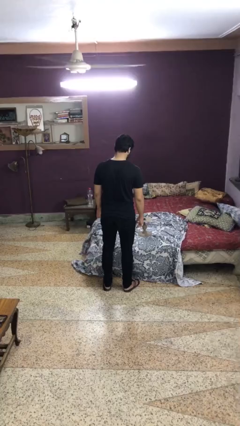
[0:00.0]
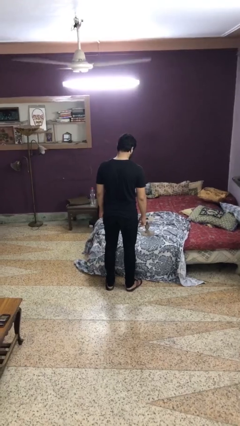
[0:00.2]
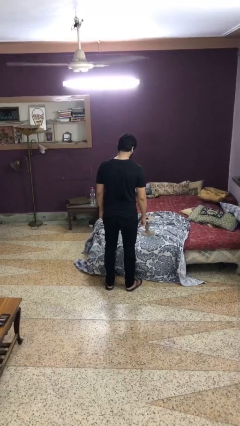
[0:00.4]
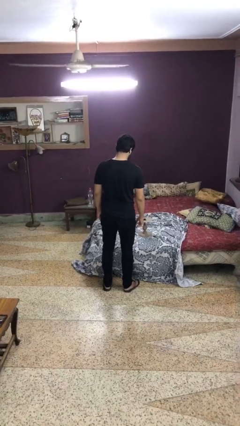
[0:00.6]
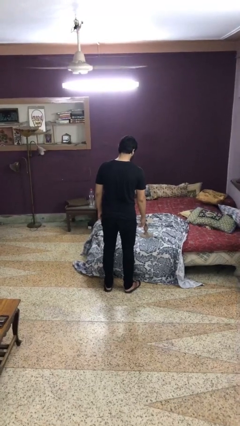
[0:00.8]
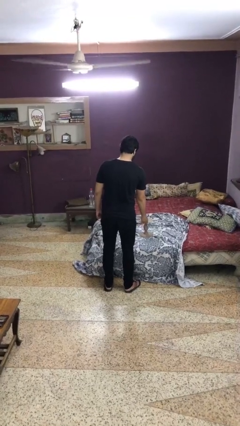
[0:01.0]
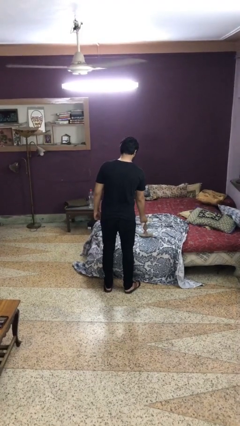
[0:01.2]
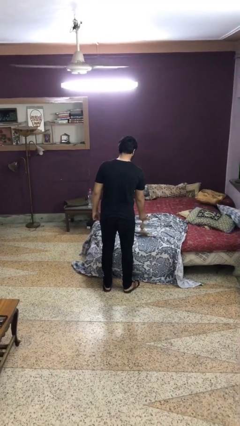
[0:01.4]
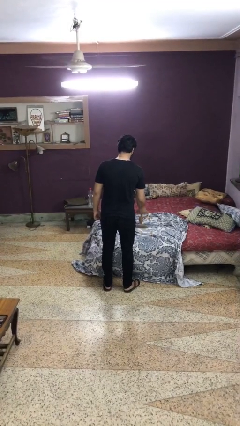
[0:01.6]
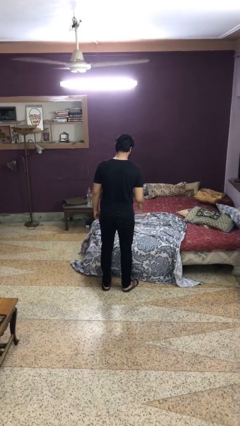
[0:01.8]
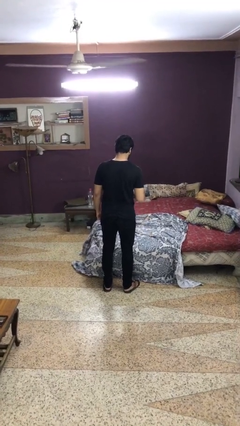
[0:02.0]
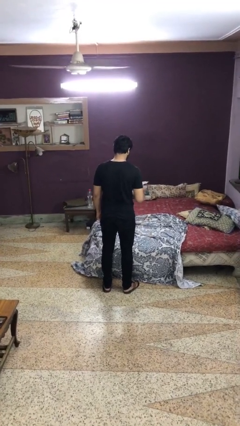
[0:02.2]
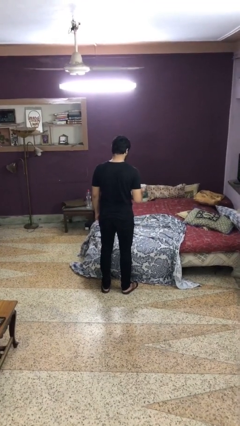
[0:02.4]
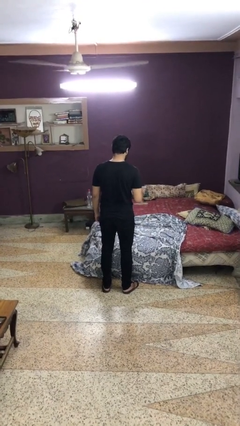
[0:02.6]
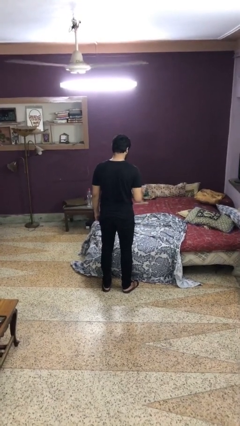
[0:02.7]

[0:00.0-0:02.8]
person picks up object from bed

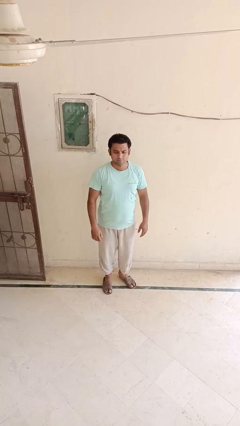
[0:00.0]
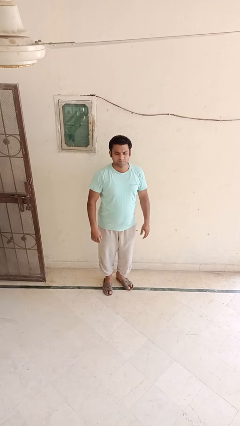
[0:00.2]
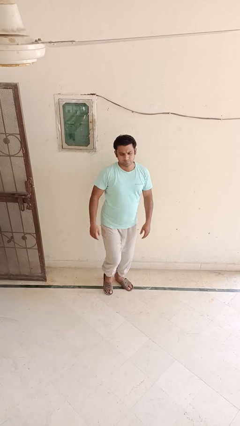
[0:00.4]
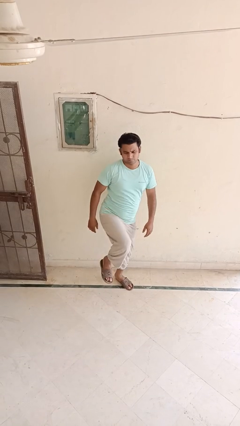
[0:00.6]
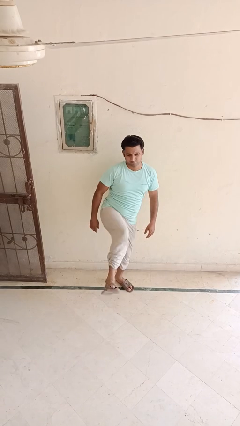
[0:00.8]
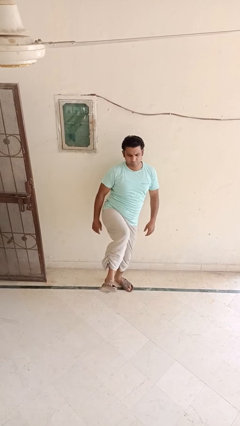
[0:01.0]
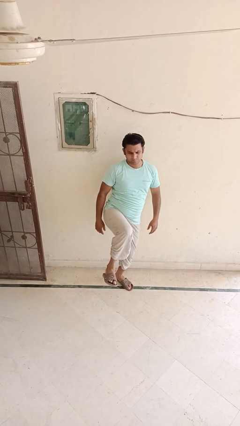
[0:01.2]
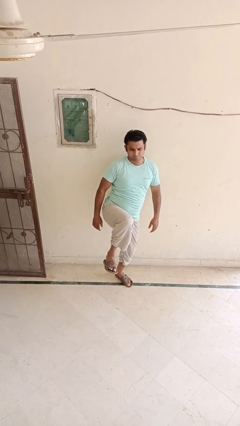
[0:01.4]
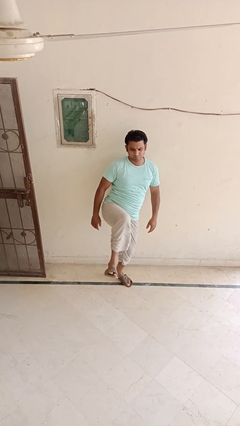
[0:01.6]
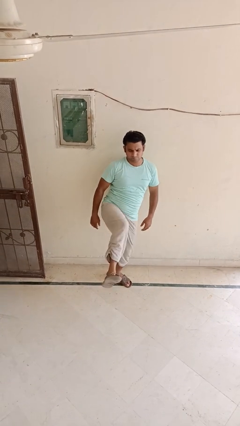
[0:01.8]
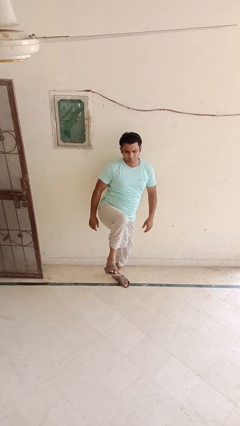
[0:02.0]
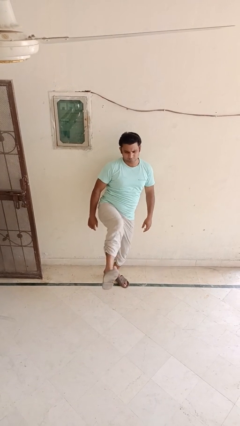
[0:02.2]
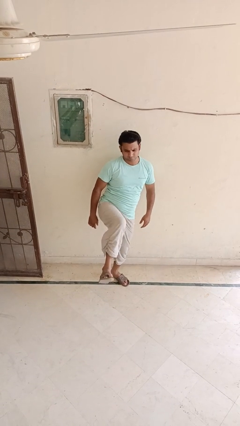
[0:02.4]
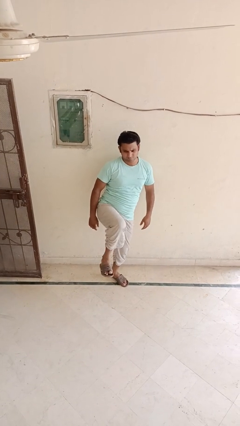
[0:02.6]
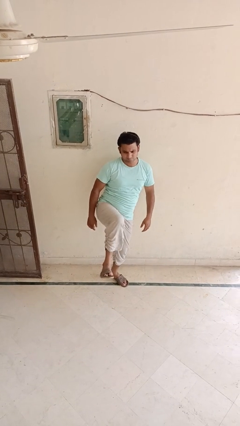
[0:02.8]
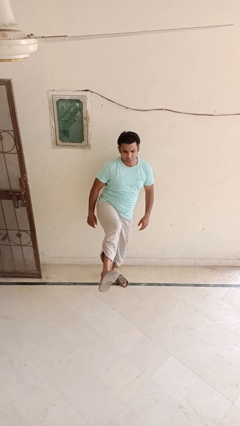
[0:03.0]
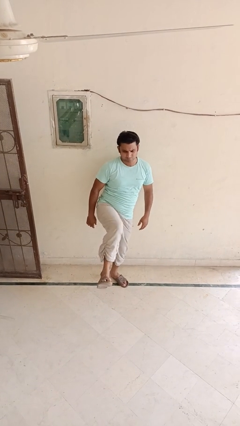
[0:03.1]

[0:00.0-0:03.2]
person karate kicks

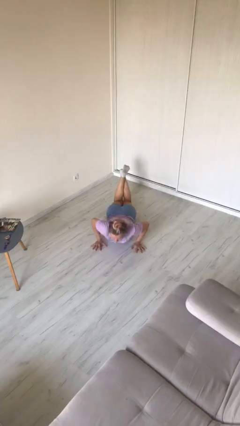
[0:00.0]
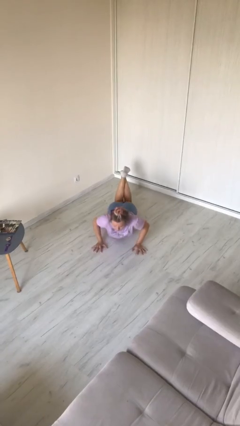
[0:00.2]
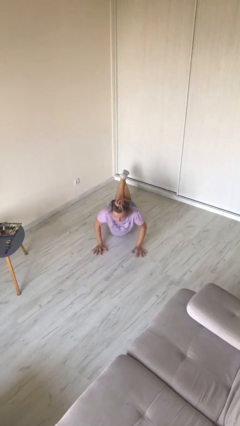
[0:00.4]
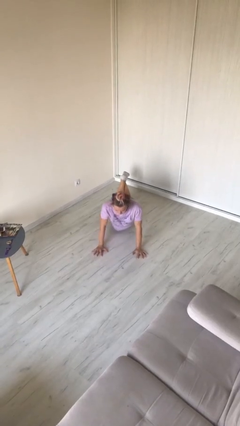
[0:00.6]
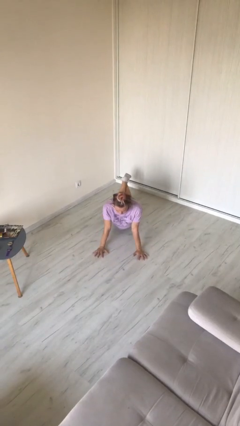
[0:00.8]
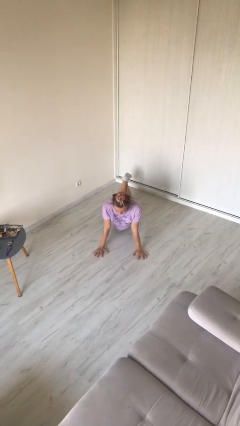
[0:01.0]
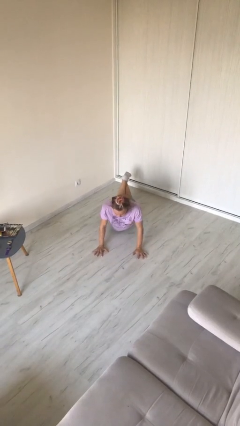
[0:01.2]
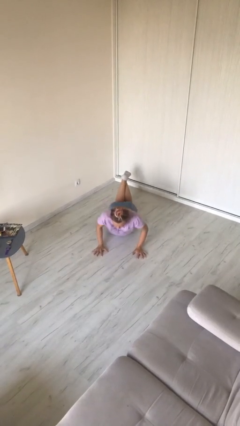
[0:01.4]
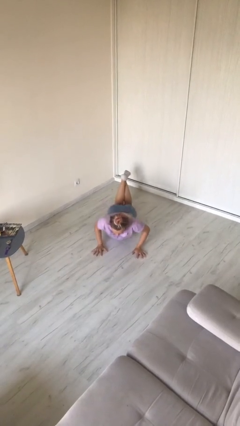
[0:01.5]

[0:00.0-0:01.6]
person exercises with pushup

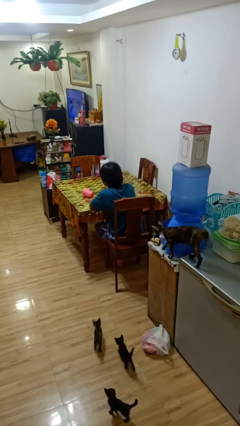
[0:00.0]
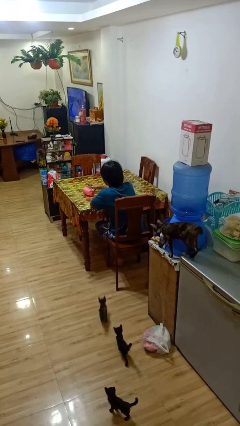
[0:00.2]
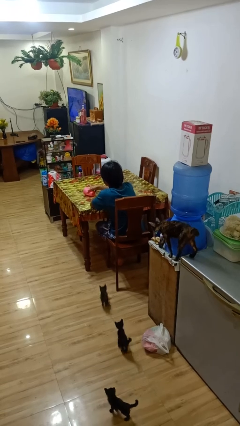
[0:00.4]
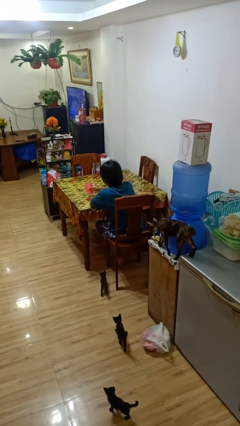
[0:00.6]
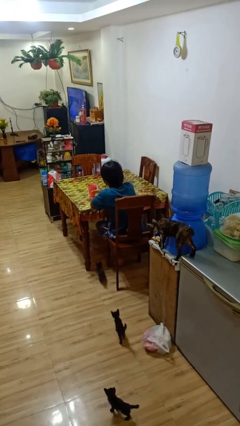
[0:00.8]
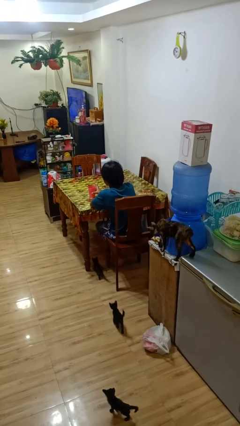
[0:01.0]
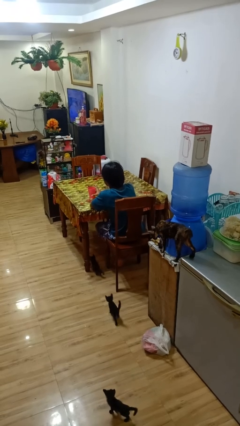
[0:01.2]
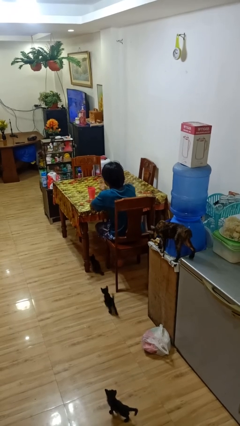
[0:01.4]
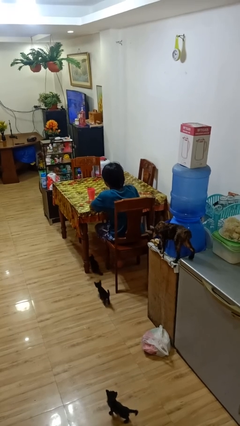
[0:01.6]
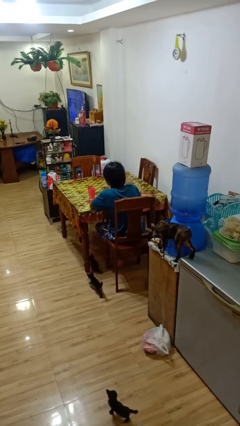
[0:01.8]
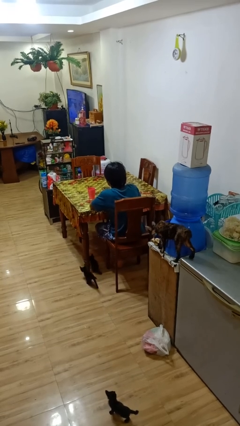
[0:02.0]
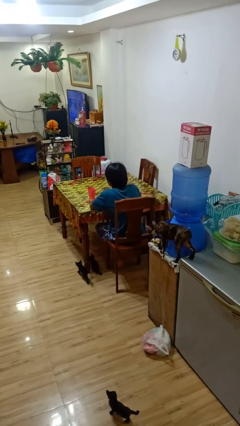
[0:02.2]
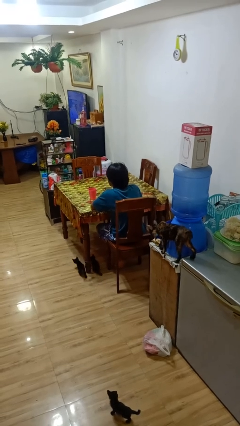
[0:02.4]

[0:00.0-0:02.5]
person sets upright glass

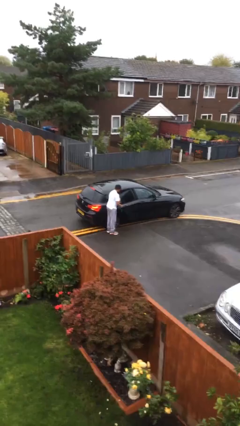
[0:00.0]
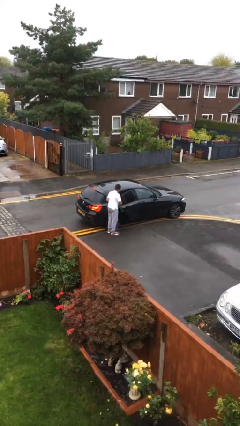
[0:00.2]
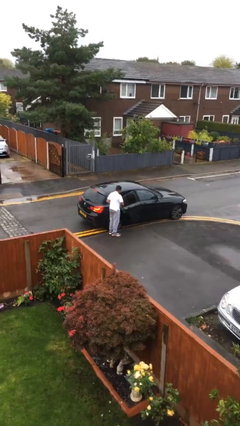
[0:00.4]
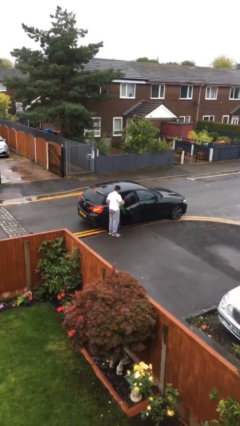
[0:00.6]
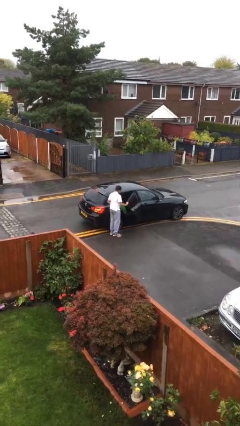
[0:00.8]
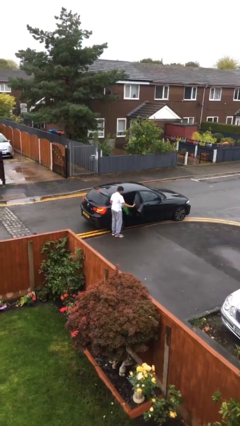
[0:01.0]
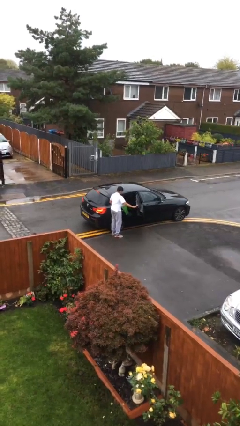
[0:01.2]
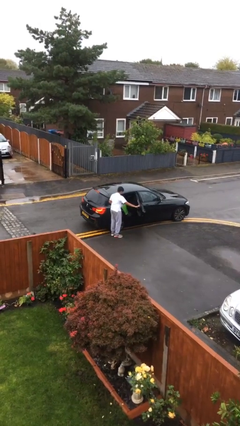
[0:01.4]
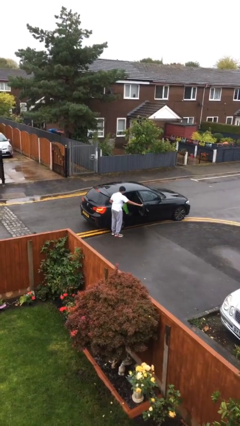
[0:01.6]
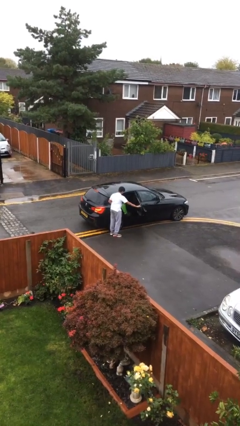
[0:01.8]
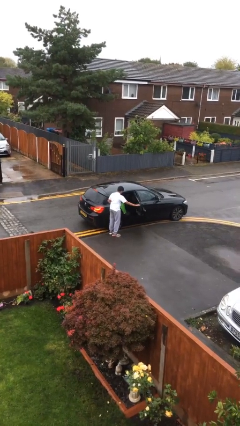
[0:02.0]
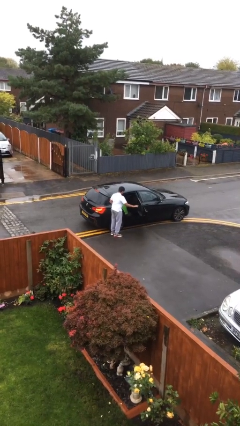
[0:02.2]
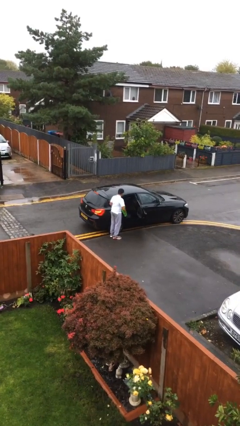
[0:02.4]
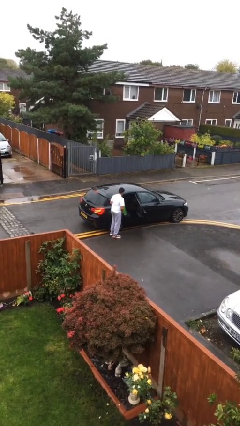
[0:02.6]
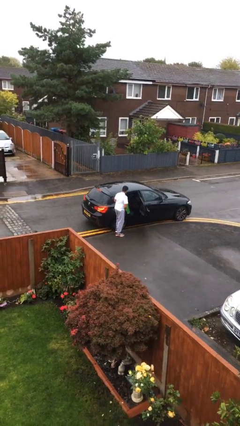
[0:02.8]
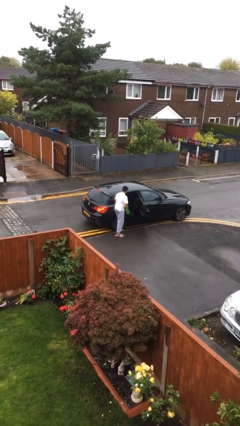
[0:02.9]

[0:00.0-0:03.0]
person opens car door

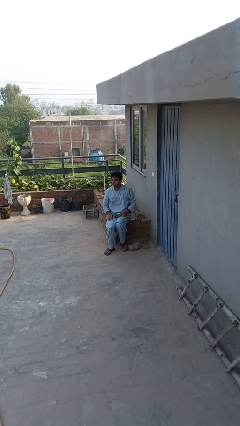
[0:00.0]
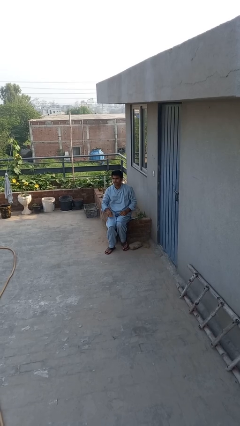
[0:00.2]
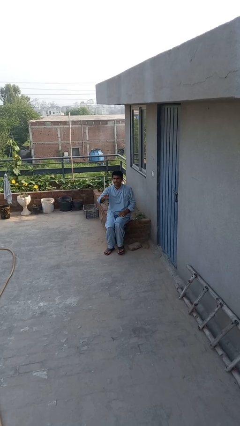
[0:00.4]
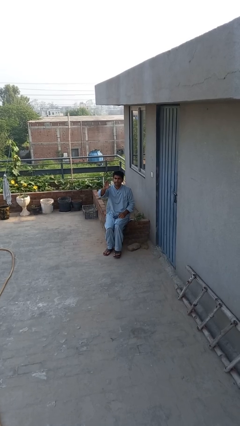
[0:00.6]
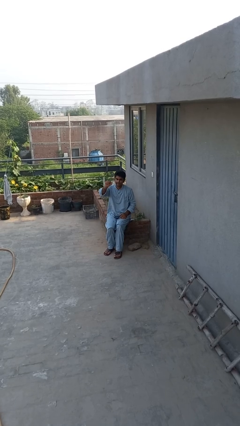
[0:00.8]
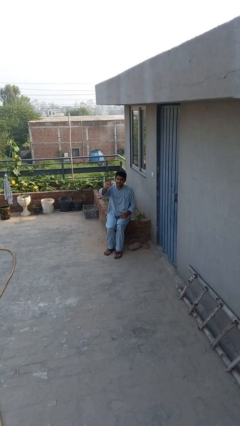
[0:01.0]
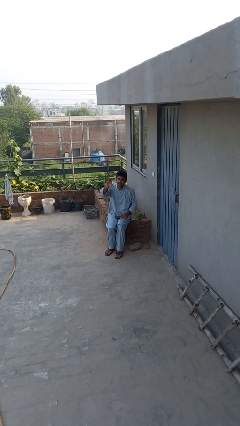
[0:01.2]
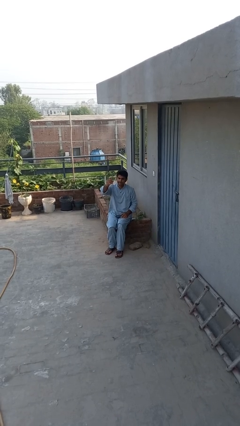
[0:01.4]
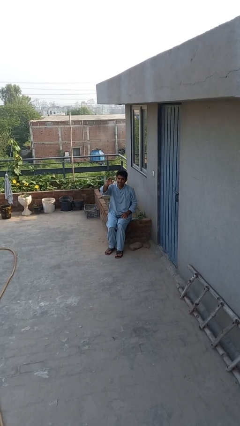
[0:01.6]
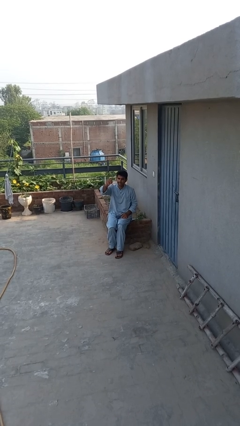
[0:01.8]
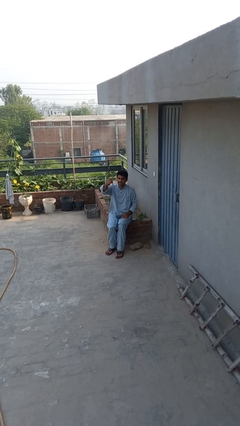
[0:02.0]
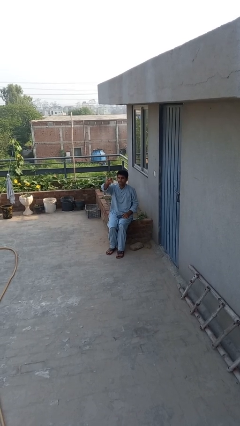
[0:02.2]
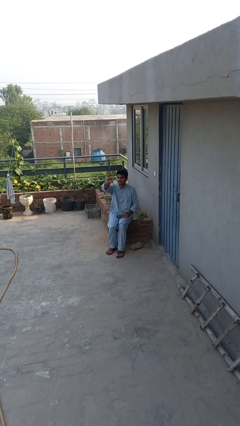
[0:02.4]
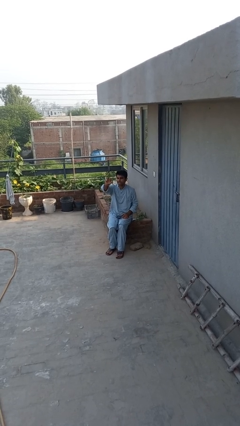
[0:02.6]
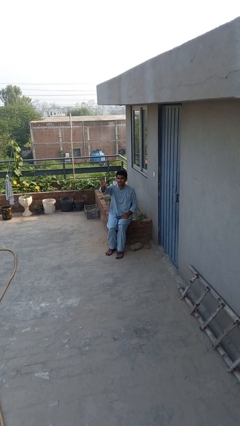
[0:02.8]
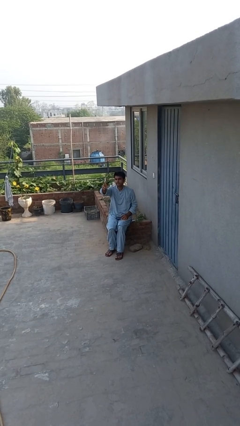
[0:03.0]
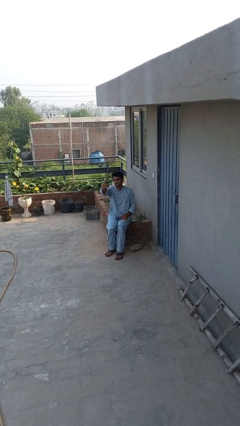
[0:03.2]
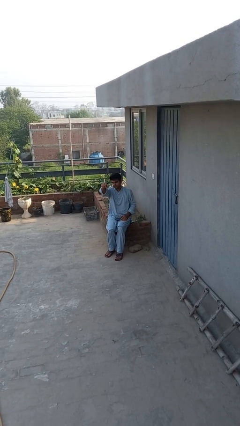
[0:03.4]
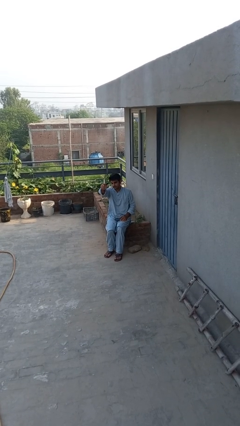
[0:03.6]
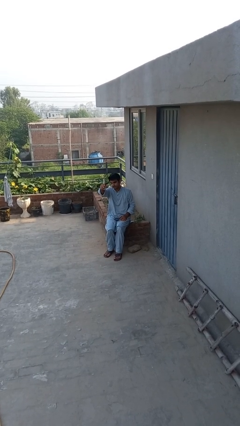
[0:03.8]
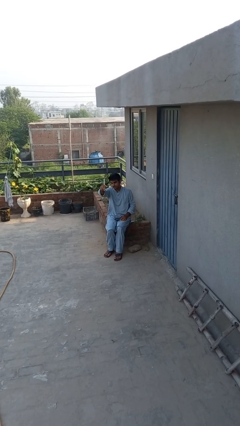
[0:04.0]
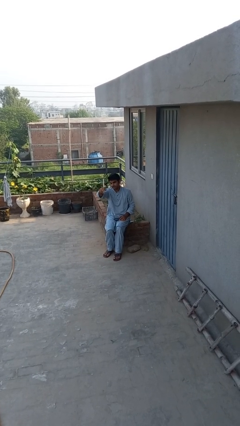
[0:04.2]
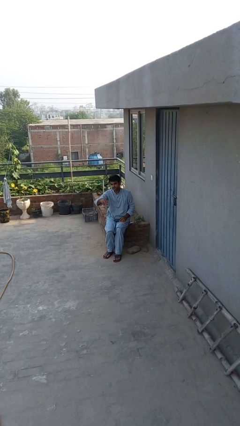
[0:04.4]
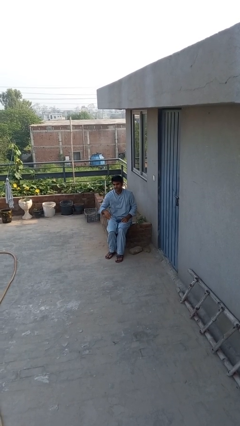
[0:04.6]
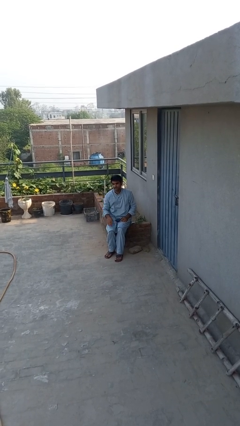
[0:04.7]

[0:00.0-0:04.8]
person gestures come here
